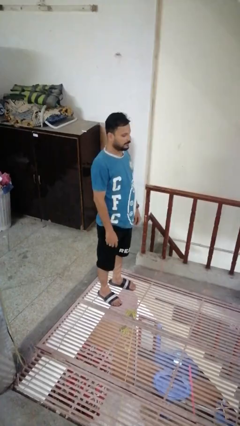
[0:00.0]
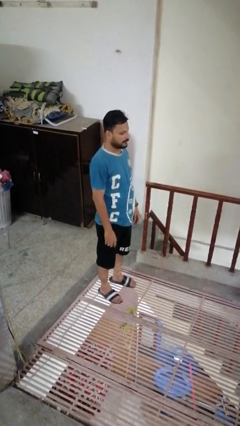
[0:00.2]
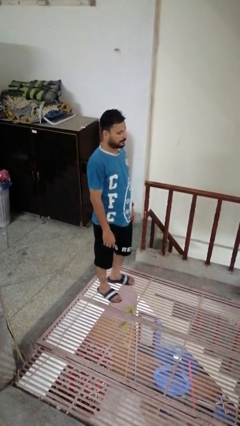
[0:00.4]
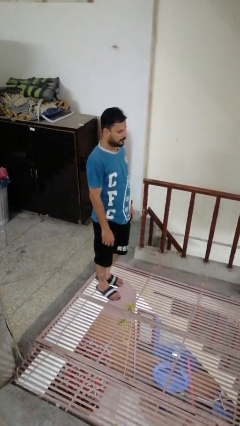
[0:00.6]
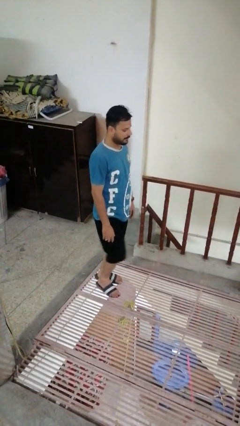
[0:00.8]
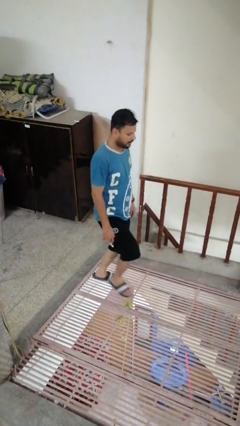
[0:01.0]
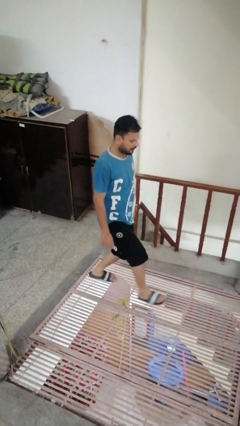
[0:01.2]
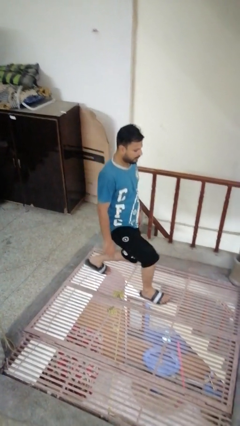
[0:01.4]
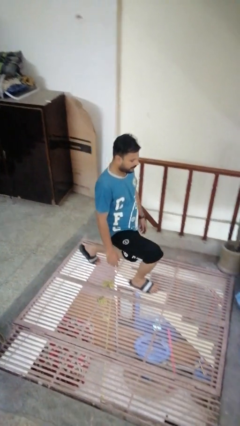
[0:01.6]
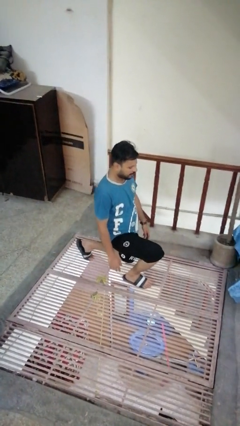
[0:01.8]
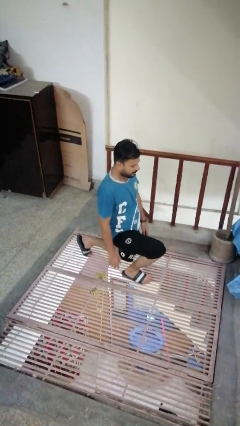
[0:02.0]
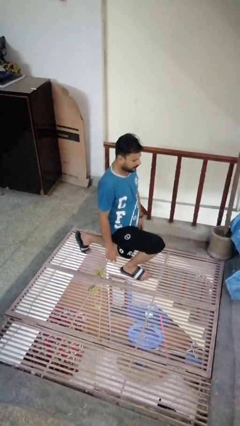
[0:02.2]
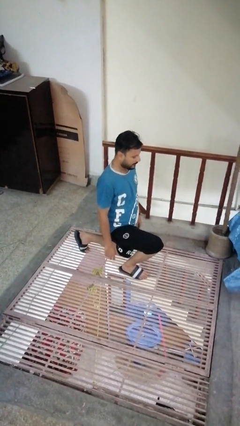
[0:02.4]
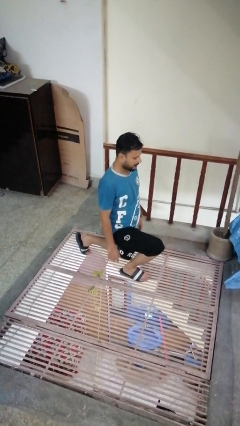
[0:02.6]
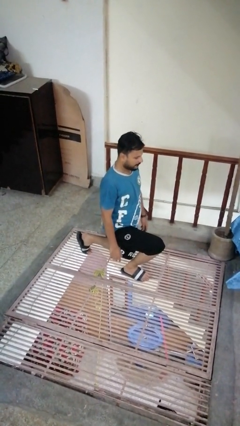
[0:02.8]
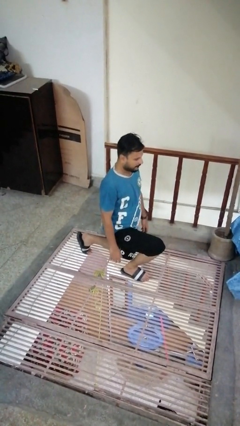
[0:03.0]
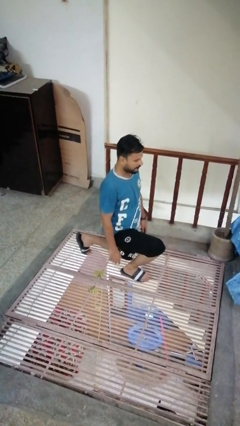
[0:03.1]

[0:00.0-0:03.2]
person exercises with lunges

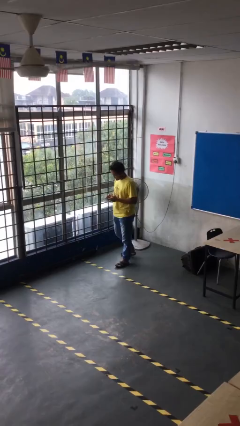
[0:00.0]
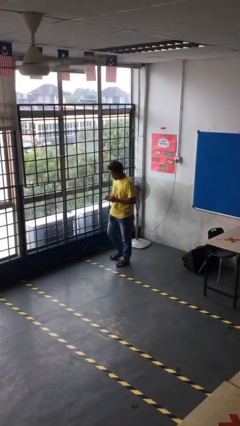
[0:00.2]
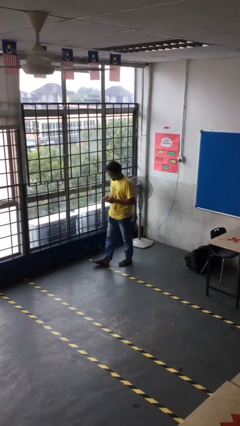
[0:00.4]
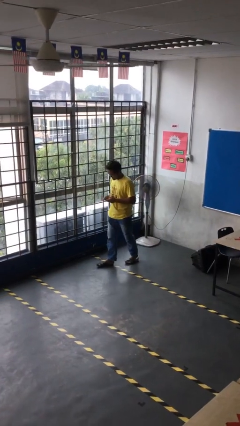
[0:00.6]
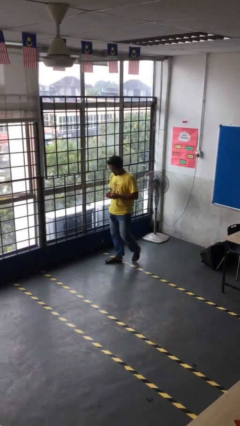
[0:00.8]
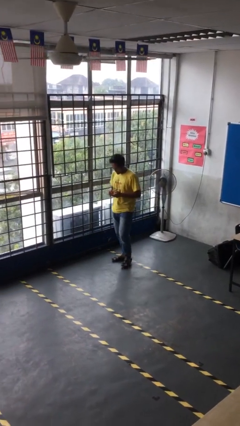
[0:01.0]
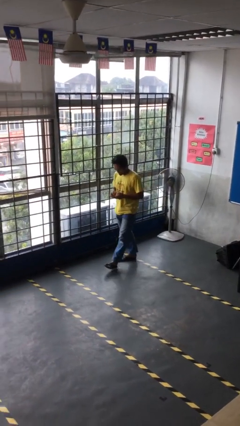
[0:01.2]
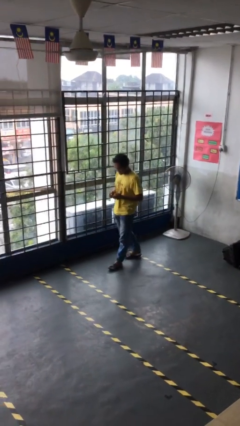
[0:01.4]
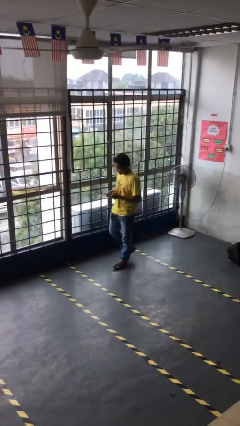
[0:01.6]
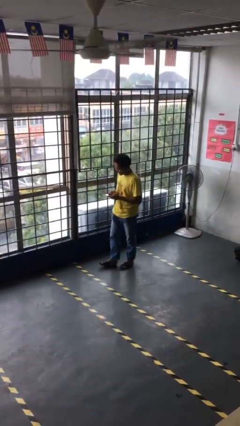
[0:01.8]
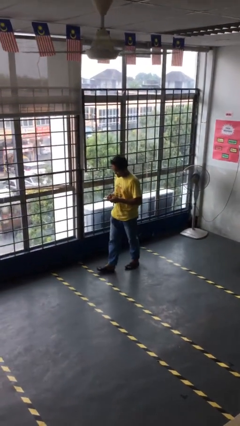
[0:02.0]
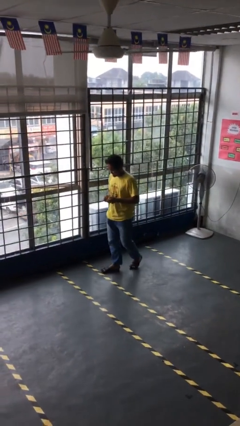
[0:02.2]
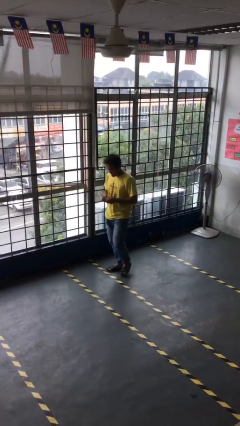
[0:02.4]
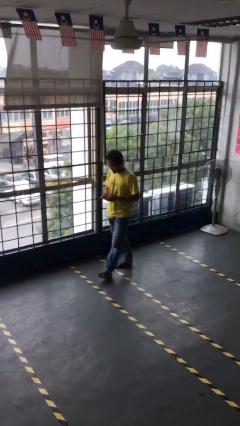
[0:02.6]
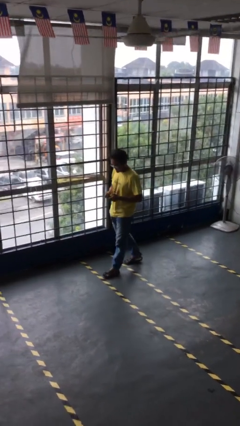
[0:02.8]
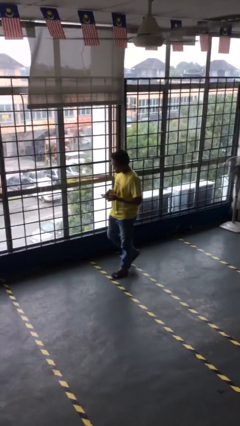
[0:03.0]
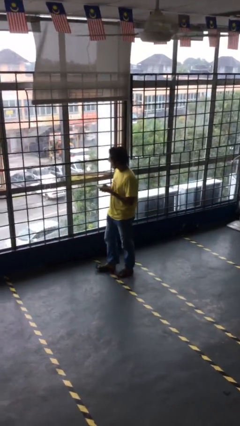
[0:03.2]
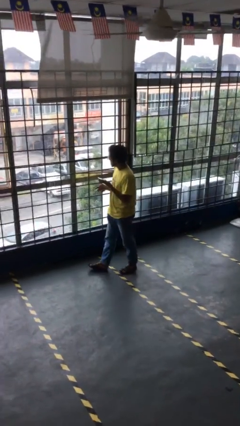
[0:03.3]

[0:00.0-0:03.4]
person texts on phone

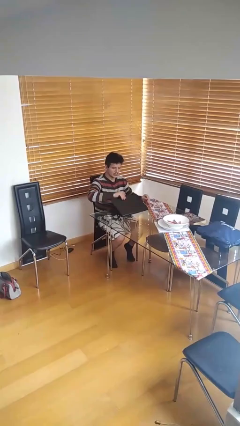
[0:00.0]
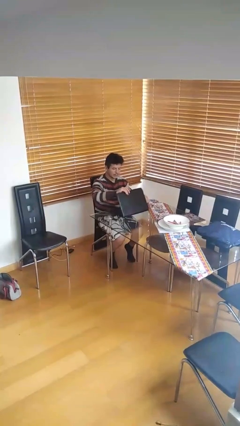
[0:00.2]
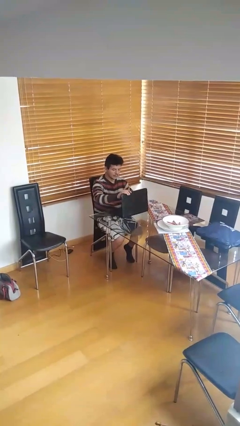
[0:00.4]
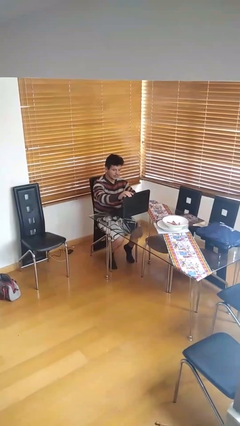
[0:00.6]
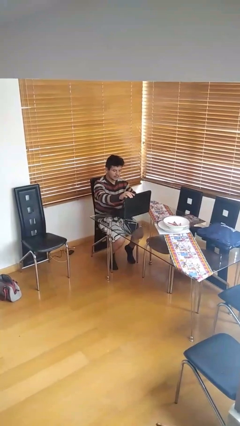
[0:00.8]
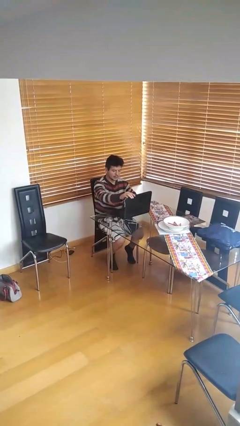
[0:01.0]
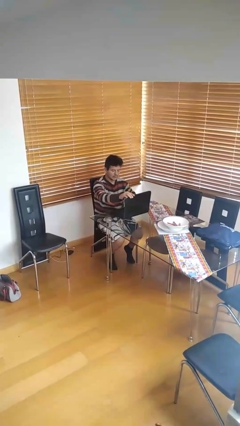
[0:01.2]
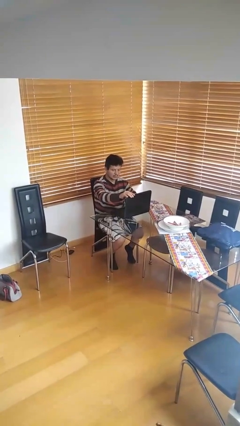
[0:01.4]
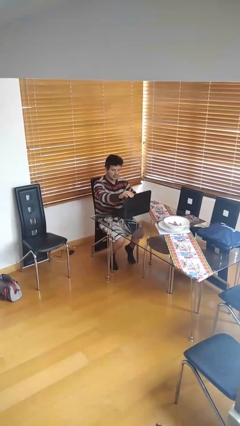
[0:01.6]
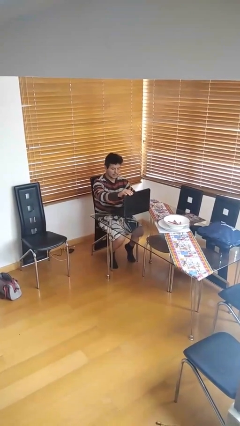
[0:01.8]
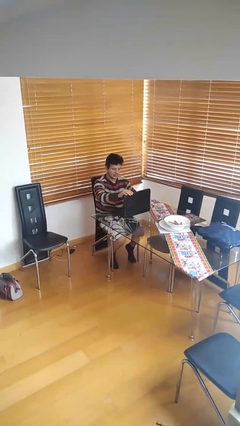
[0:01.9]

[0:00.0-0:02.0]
person interacts with laptop

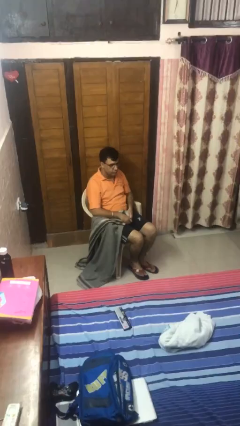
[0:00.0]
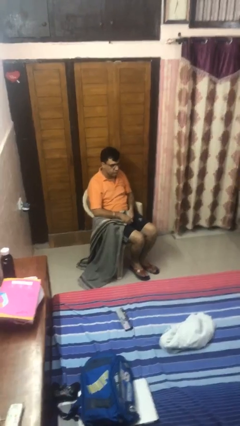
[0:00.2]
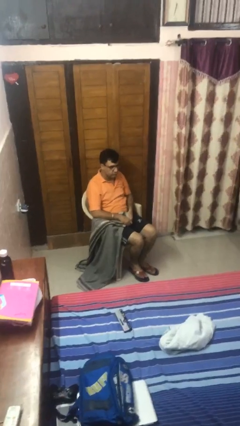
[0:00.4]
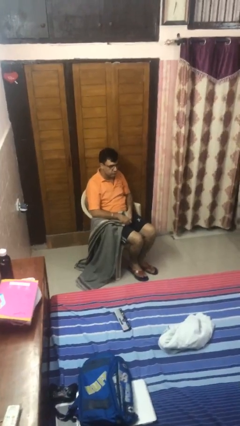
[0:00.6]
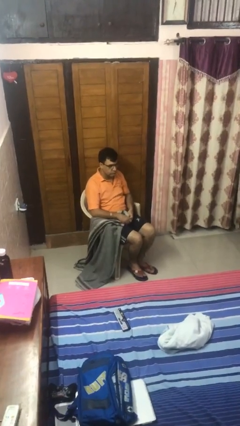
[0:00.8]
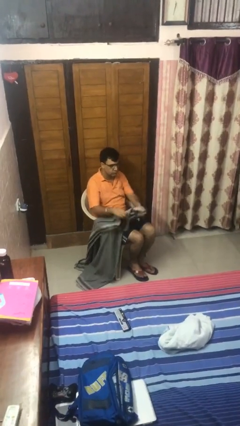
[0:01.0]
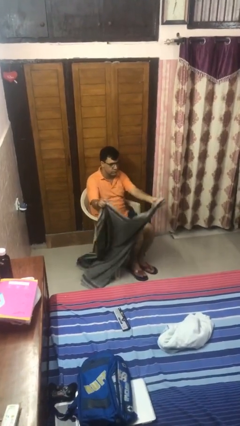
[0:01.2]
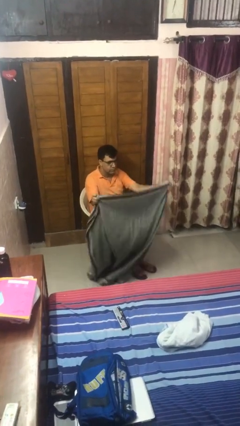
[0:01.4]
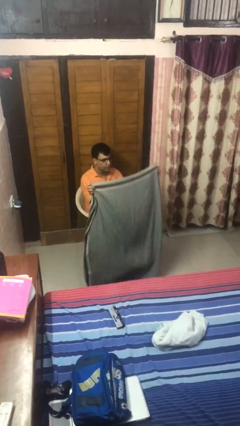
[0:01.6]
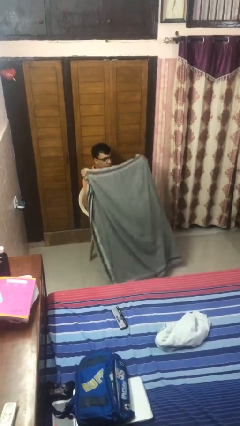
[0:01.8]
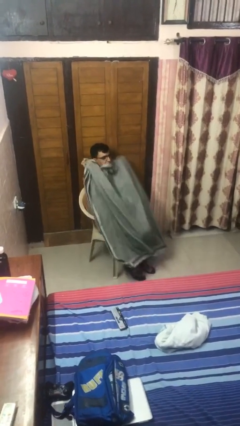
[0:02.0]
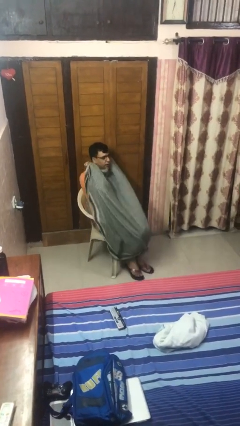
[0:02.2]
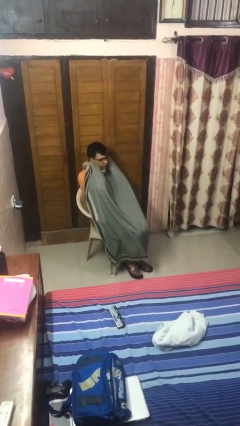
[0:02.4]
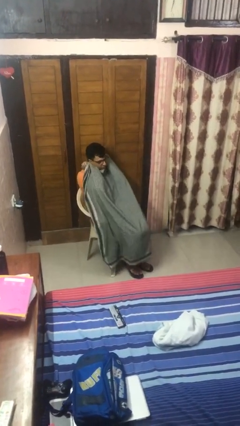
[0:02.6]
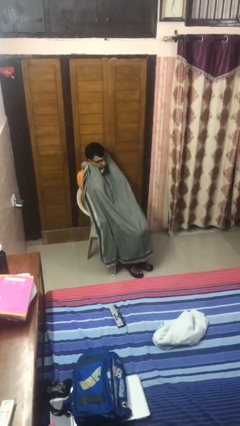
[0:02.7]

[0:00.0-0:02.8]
person covers with blanket

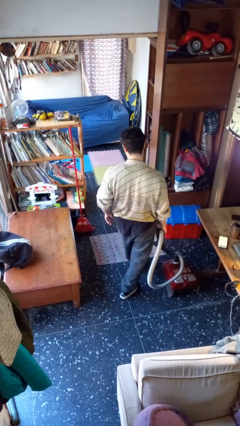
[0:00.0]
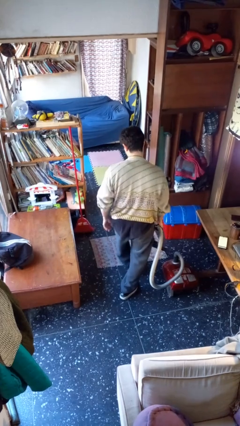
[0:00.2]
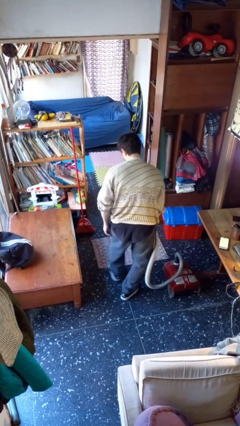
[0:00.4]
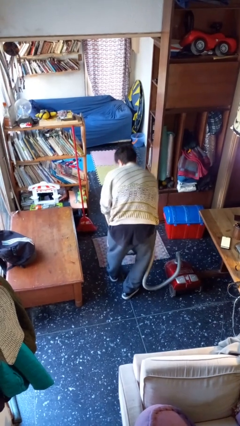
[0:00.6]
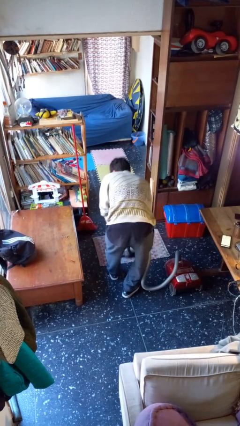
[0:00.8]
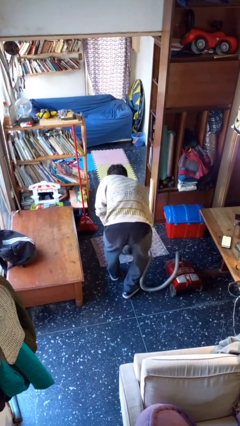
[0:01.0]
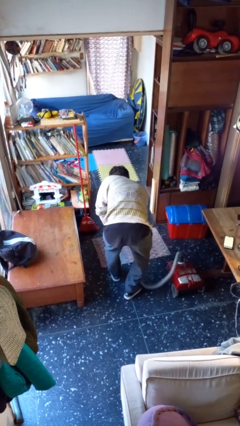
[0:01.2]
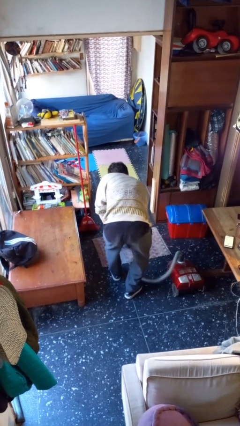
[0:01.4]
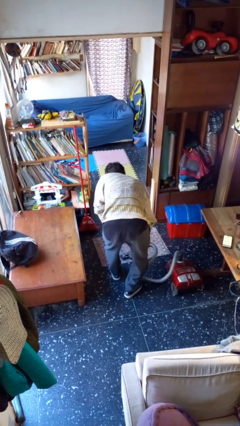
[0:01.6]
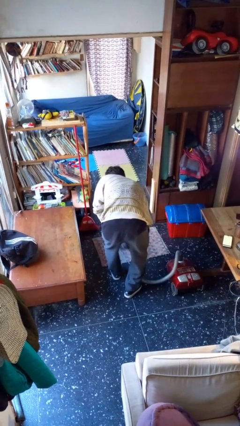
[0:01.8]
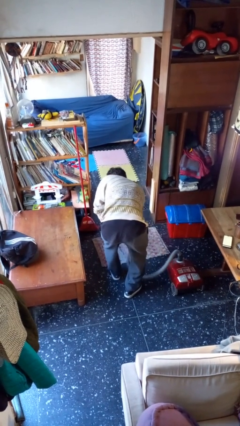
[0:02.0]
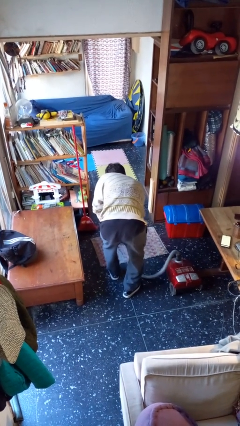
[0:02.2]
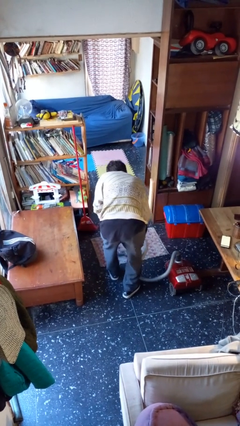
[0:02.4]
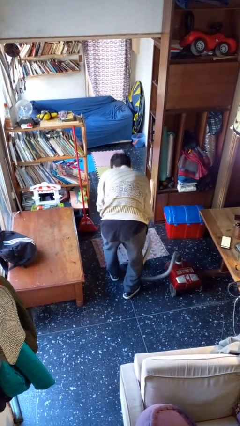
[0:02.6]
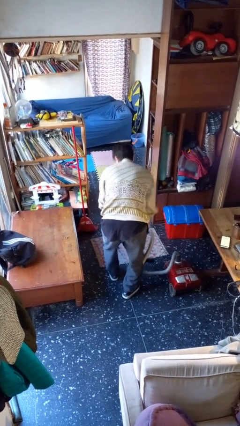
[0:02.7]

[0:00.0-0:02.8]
person vacuums carpet

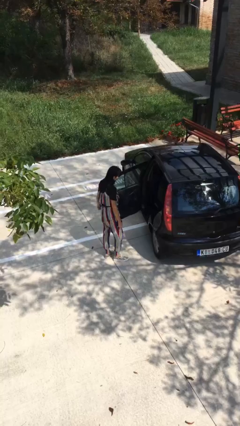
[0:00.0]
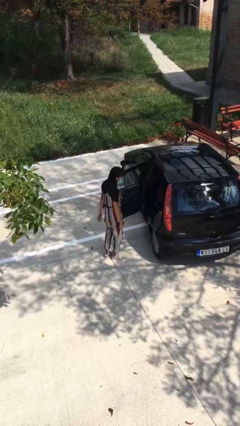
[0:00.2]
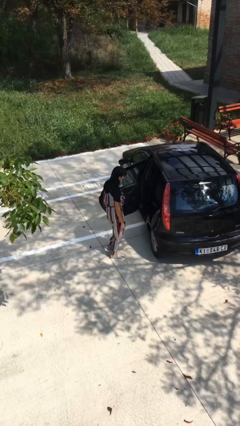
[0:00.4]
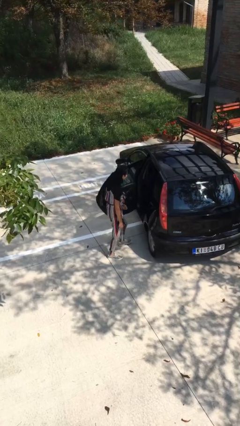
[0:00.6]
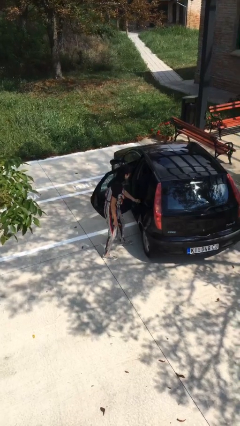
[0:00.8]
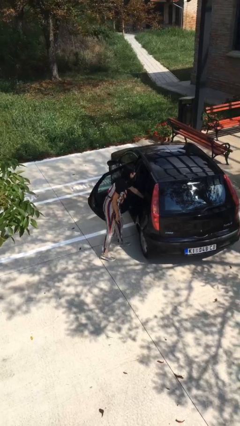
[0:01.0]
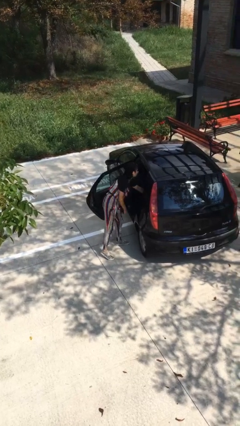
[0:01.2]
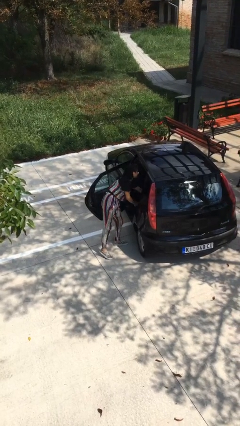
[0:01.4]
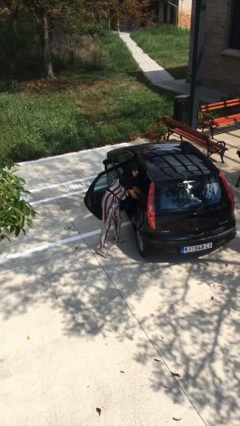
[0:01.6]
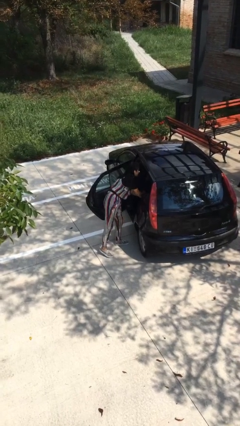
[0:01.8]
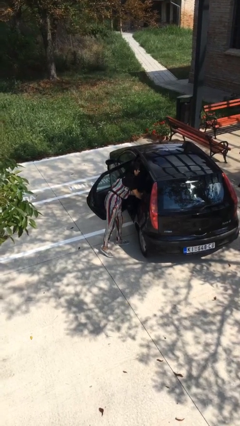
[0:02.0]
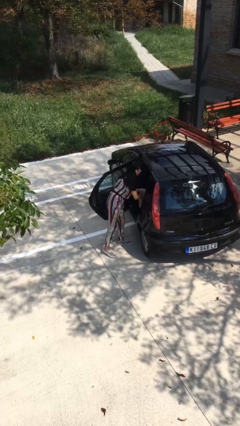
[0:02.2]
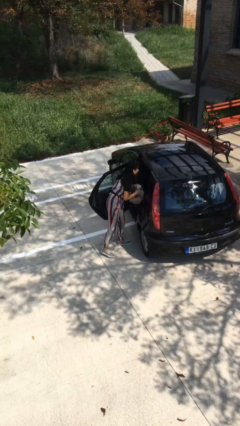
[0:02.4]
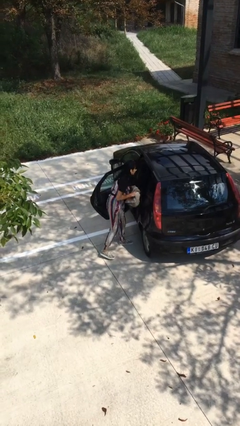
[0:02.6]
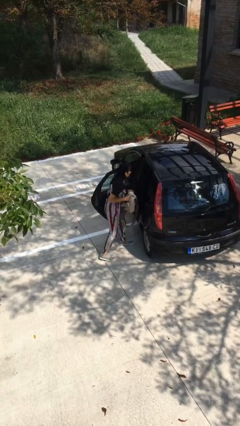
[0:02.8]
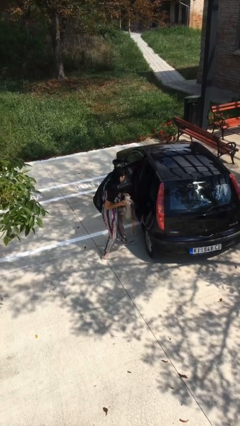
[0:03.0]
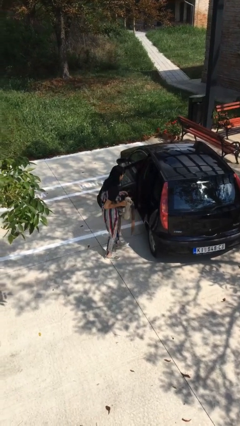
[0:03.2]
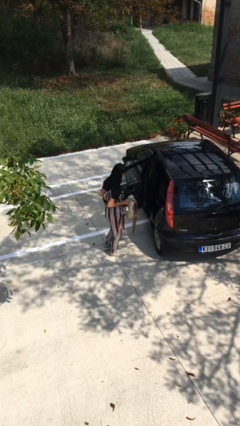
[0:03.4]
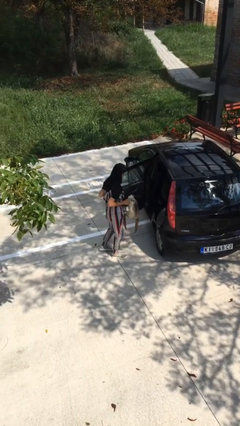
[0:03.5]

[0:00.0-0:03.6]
person unloads car
